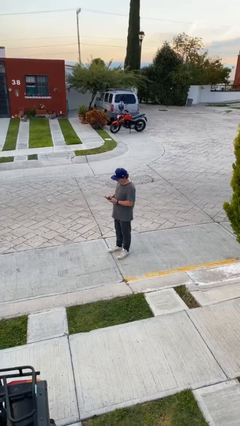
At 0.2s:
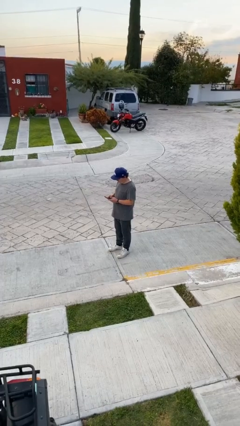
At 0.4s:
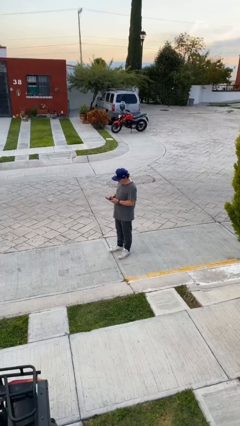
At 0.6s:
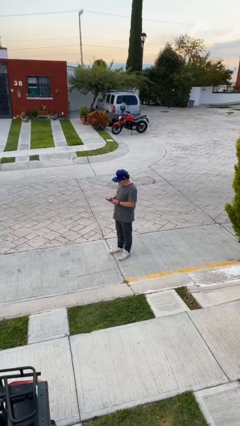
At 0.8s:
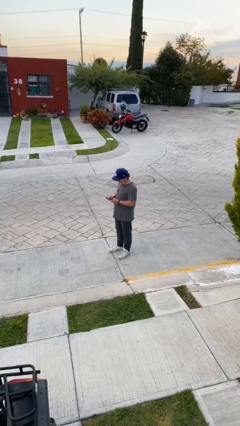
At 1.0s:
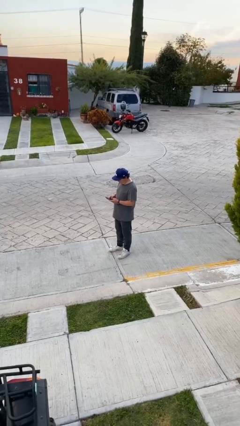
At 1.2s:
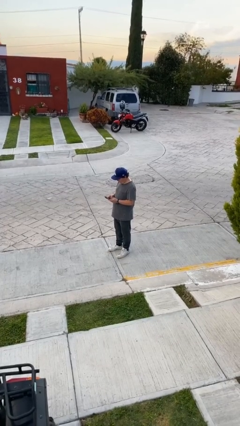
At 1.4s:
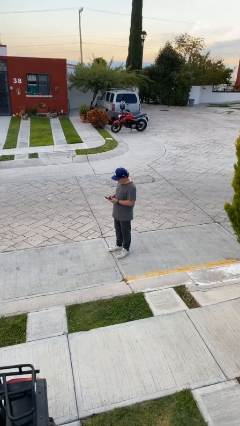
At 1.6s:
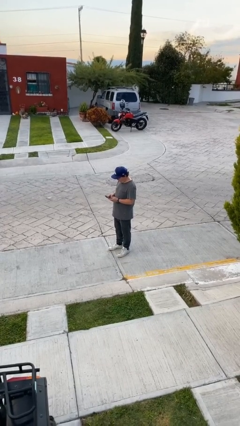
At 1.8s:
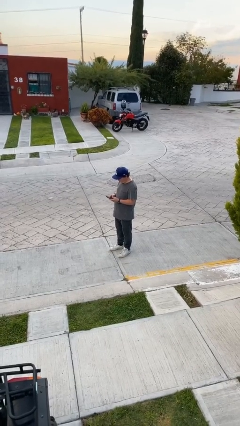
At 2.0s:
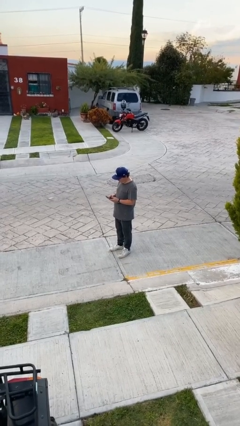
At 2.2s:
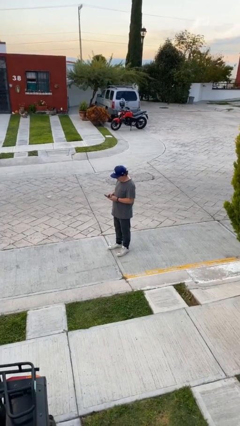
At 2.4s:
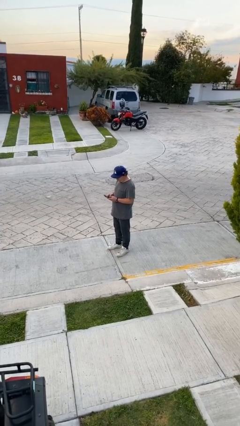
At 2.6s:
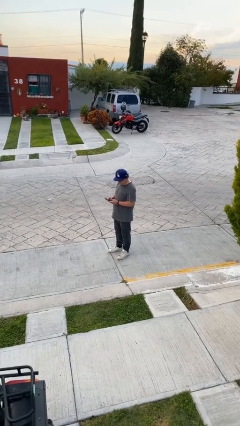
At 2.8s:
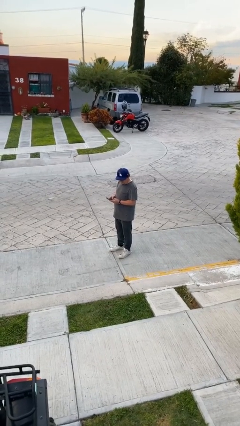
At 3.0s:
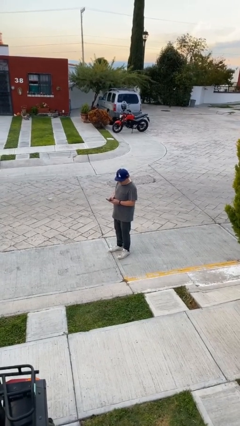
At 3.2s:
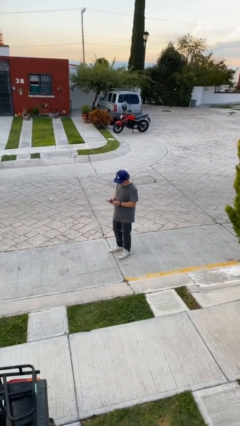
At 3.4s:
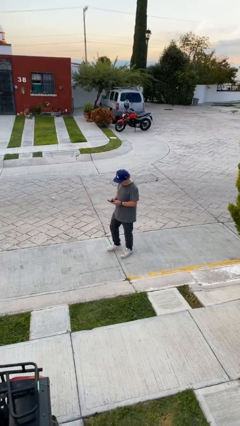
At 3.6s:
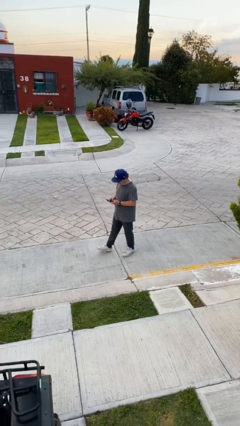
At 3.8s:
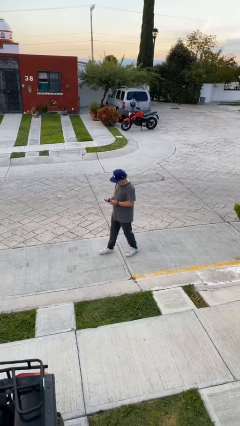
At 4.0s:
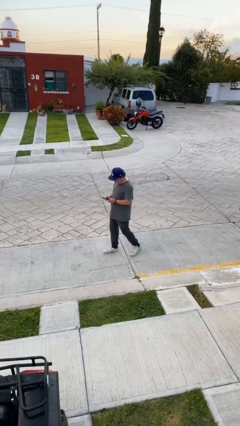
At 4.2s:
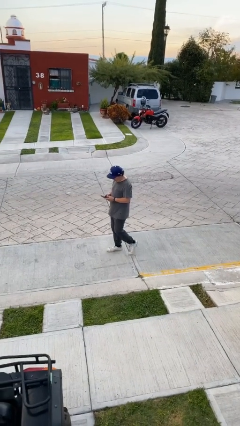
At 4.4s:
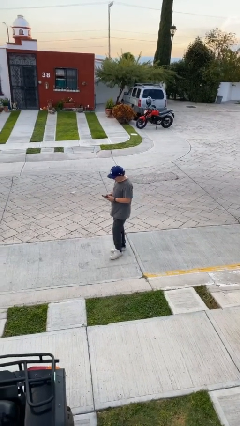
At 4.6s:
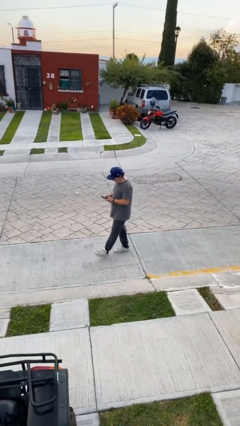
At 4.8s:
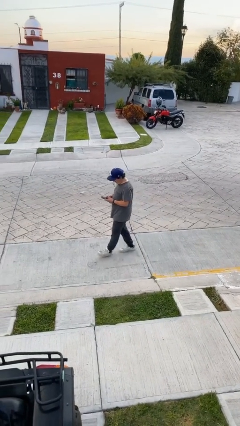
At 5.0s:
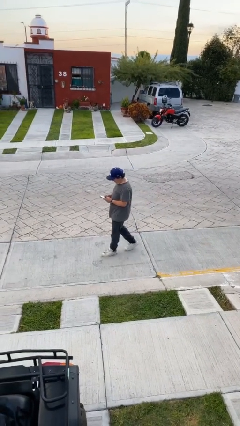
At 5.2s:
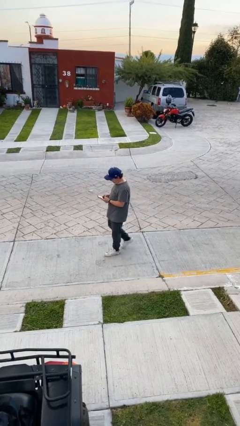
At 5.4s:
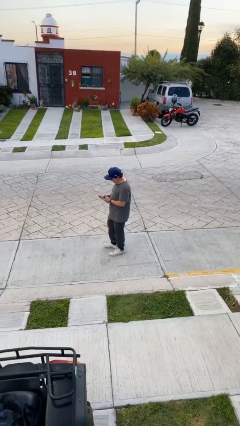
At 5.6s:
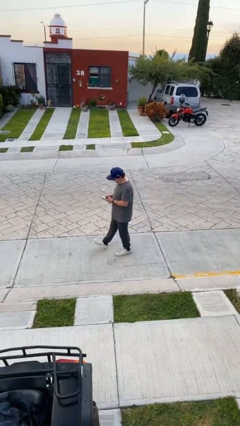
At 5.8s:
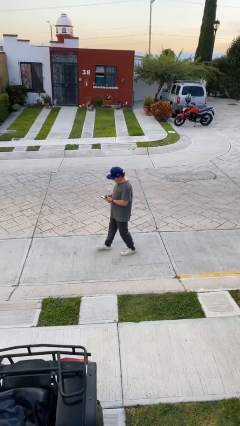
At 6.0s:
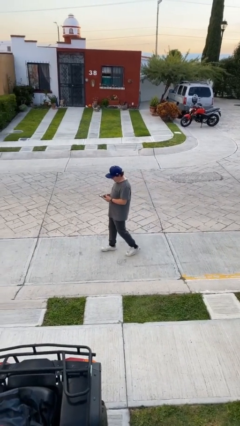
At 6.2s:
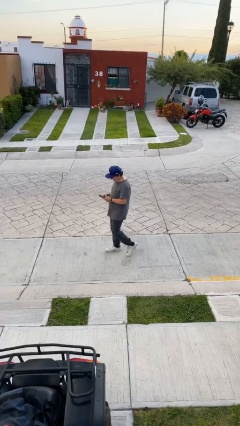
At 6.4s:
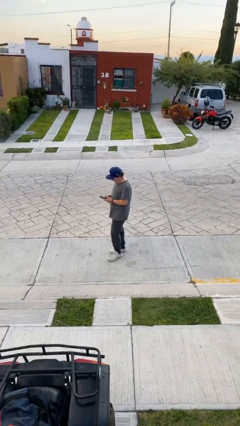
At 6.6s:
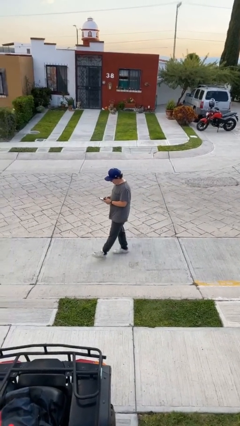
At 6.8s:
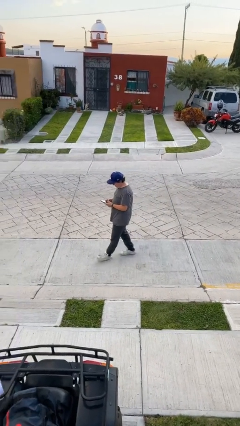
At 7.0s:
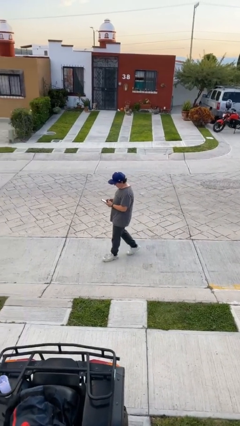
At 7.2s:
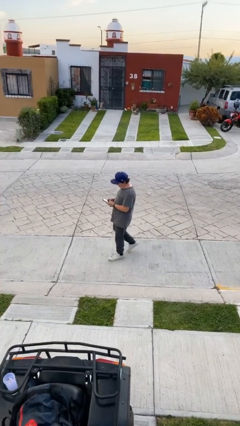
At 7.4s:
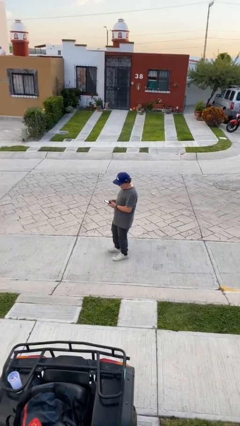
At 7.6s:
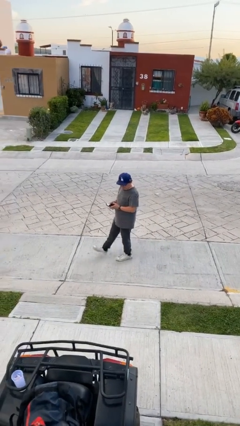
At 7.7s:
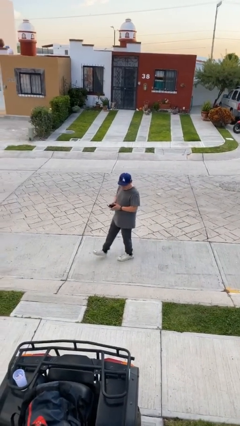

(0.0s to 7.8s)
person texts on phone

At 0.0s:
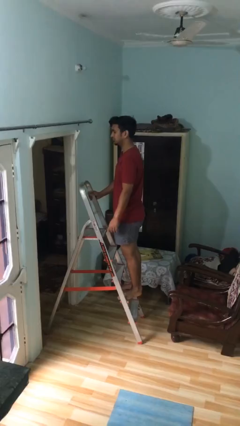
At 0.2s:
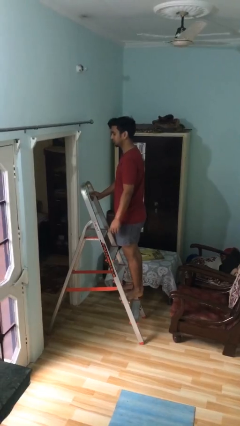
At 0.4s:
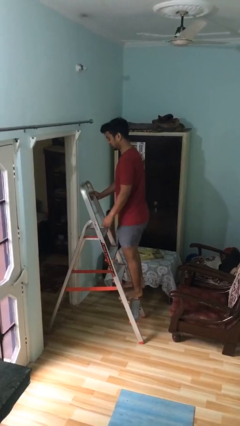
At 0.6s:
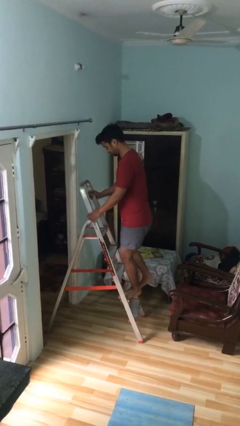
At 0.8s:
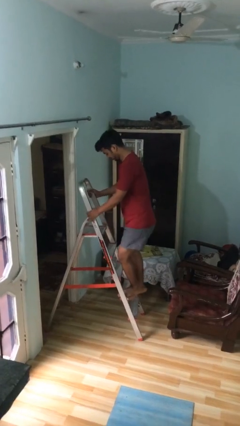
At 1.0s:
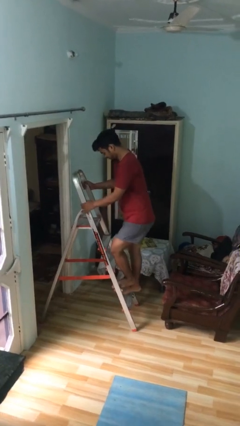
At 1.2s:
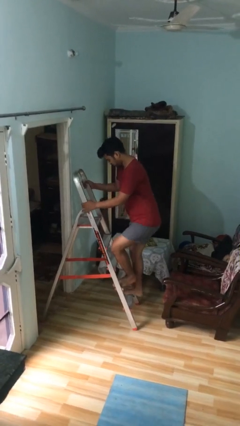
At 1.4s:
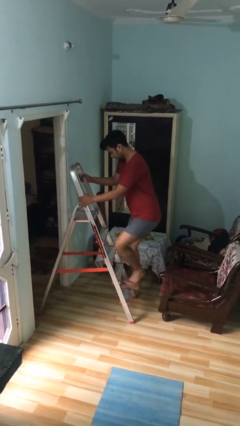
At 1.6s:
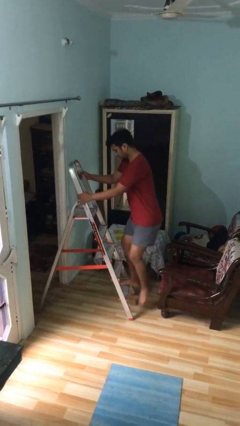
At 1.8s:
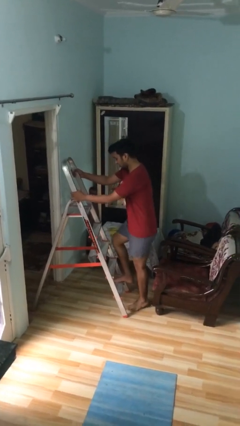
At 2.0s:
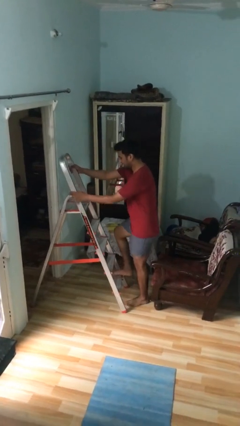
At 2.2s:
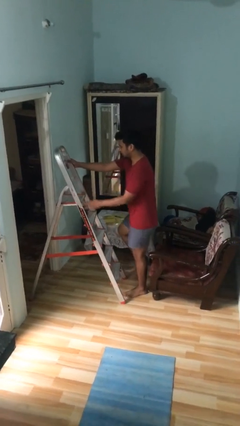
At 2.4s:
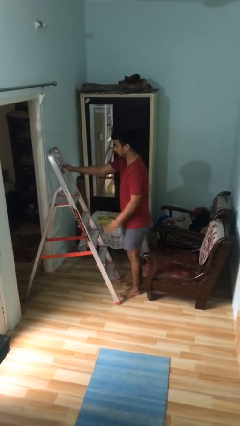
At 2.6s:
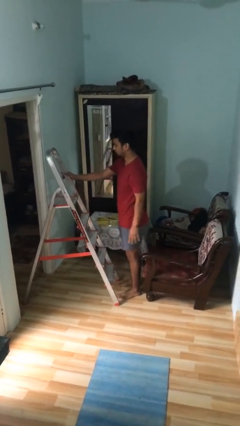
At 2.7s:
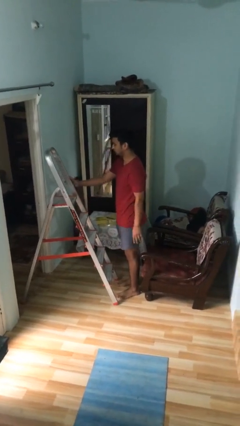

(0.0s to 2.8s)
person climbs down ladder

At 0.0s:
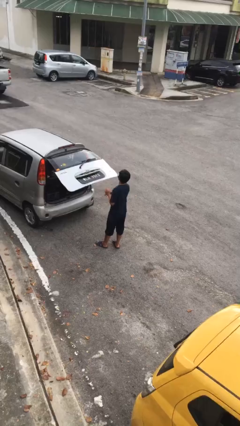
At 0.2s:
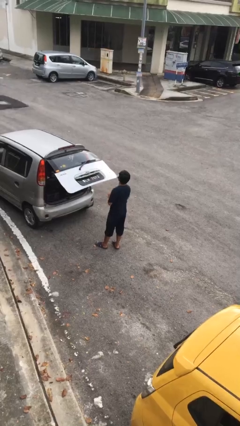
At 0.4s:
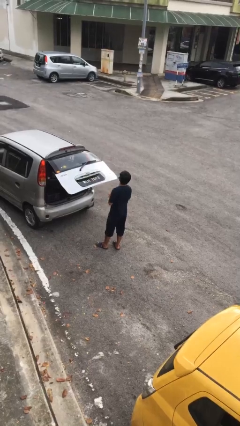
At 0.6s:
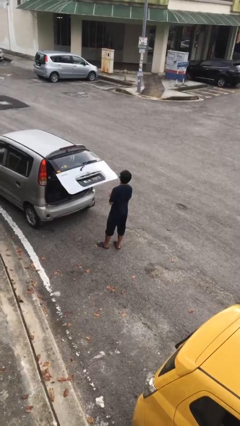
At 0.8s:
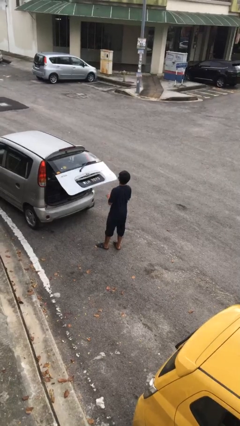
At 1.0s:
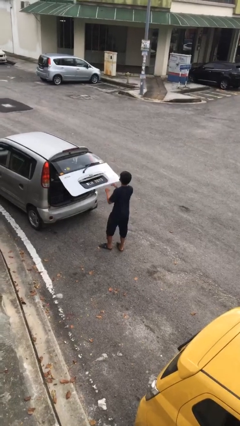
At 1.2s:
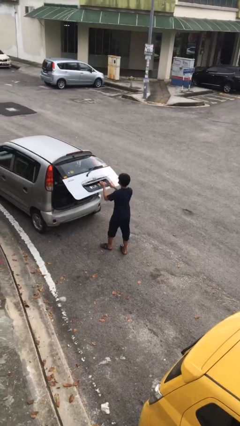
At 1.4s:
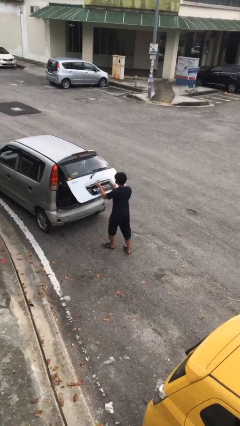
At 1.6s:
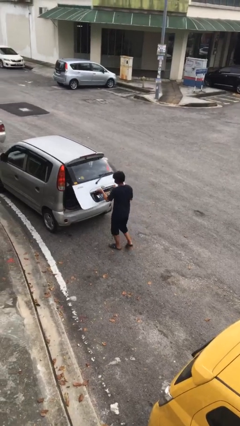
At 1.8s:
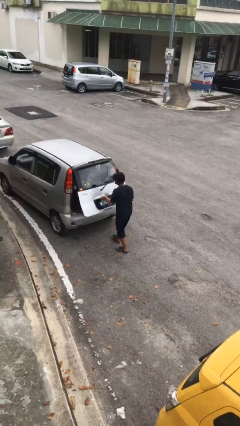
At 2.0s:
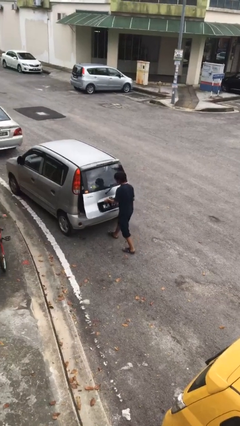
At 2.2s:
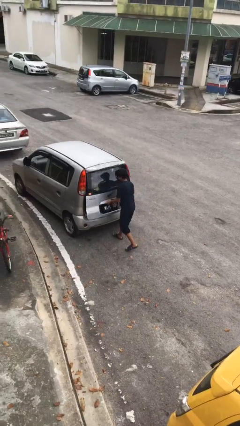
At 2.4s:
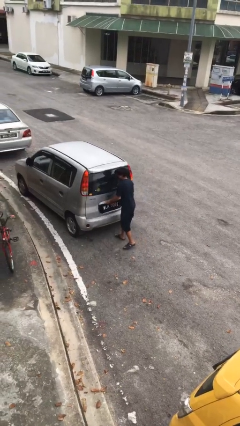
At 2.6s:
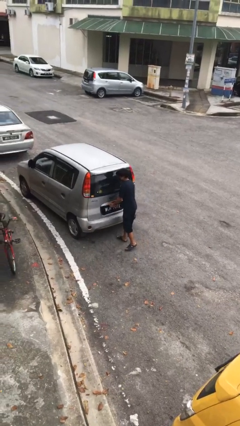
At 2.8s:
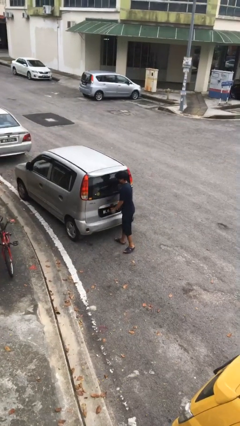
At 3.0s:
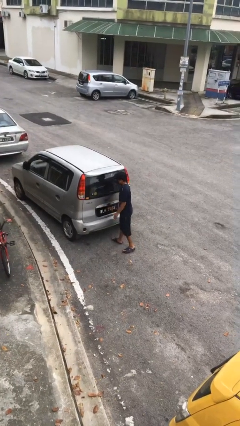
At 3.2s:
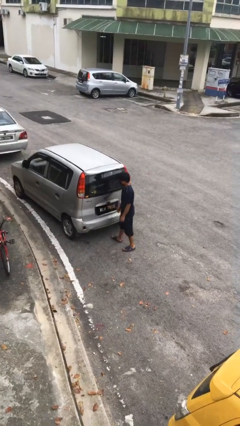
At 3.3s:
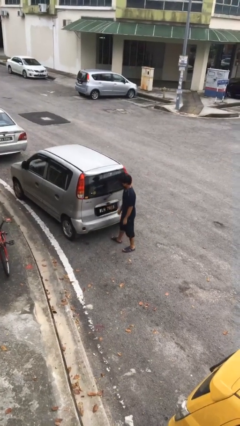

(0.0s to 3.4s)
person closes car trunk

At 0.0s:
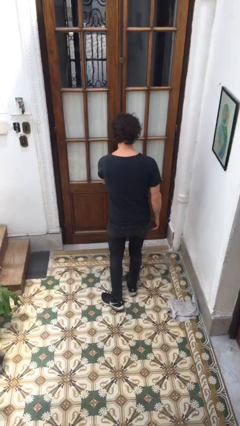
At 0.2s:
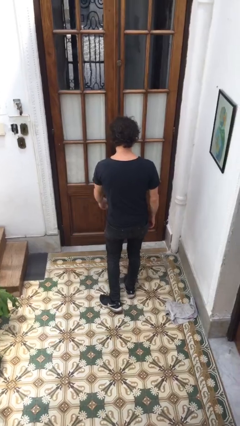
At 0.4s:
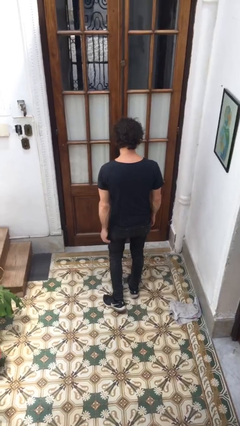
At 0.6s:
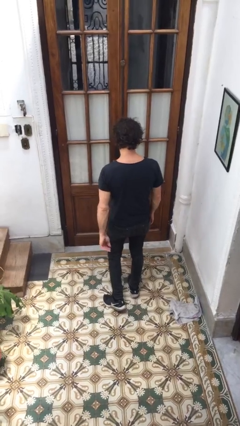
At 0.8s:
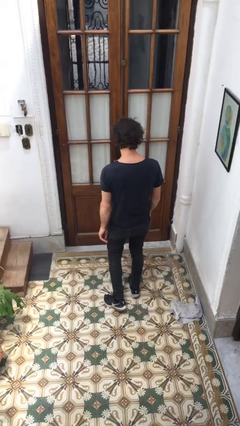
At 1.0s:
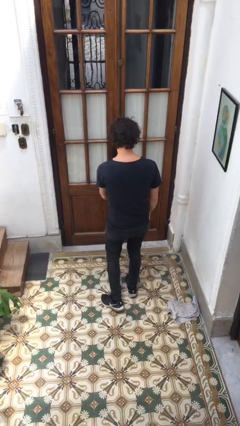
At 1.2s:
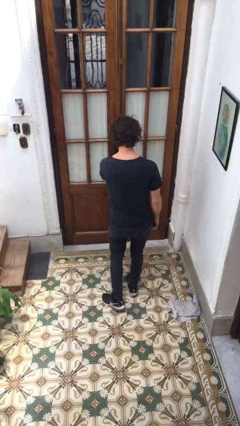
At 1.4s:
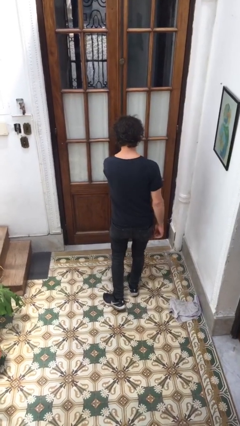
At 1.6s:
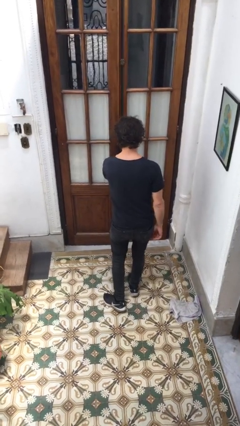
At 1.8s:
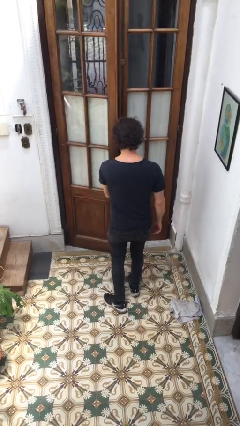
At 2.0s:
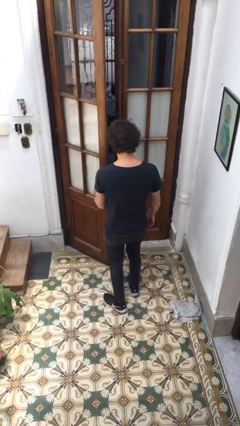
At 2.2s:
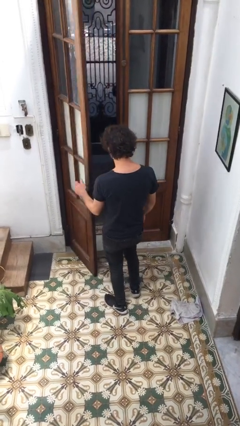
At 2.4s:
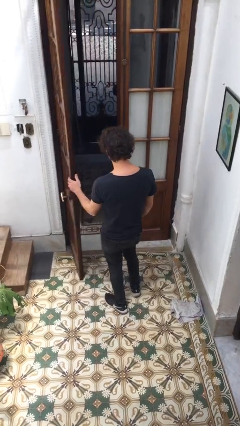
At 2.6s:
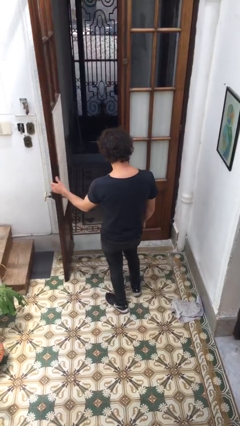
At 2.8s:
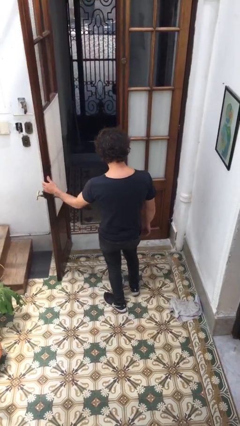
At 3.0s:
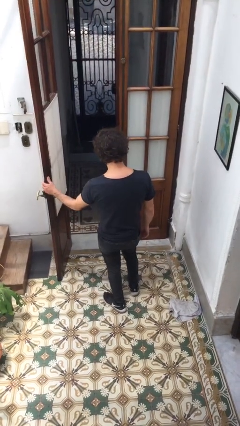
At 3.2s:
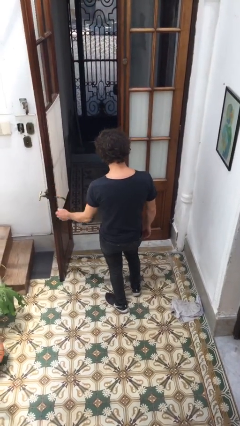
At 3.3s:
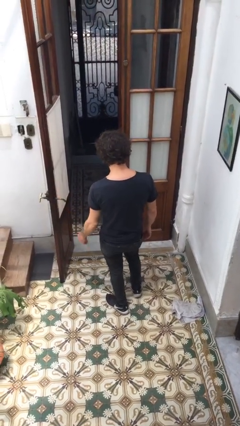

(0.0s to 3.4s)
person opens facility door

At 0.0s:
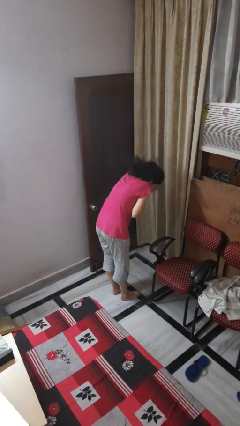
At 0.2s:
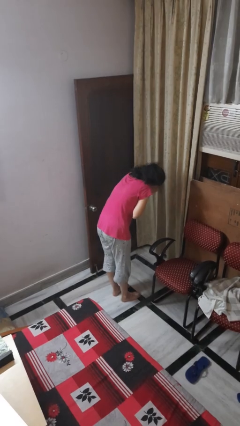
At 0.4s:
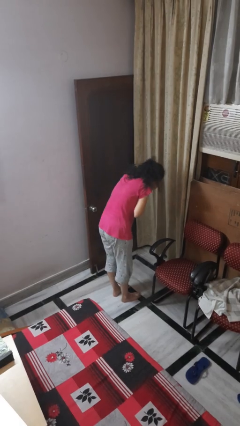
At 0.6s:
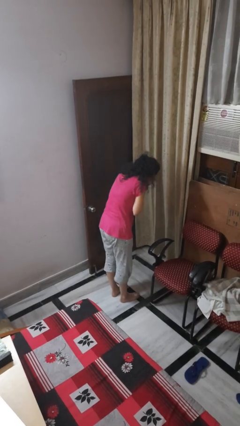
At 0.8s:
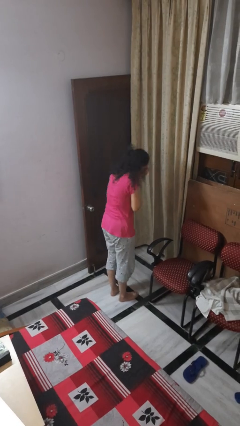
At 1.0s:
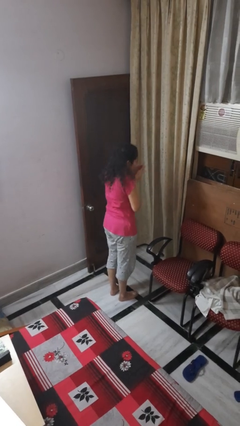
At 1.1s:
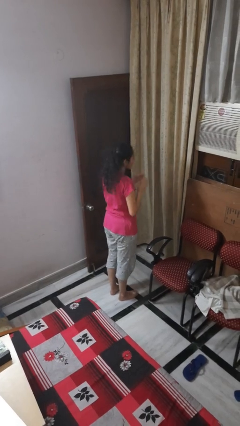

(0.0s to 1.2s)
person sneezes into hand
